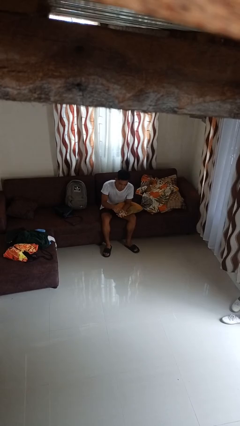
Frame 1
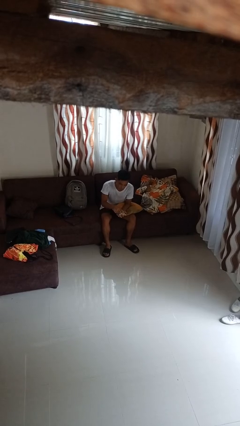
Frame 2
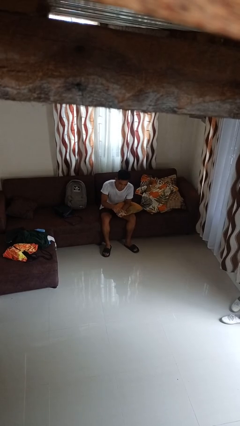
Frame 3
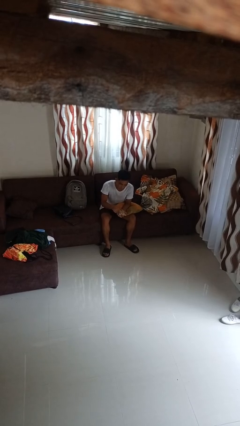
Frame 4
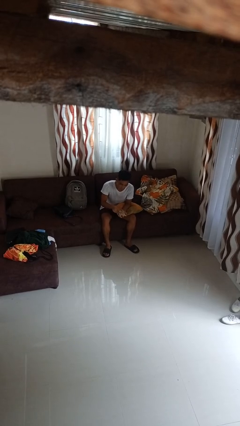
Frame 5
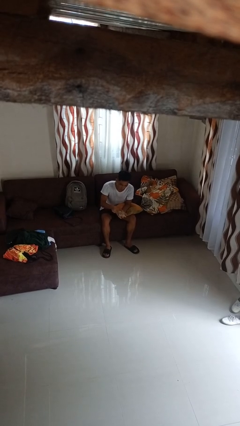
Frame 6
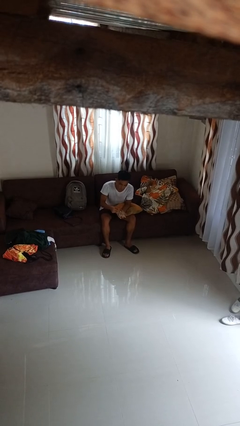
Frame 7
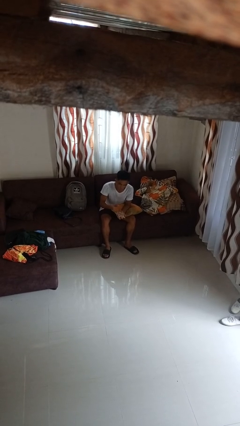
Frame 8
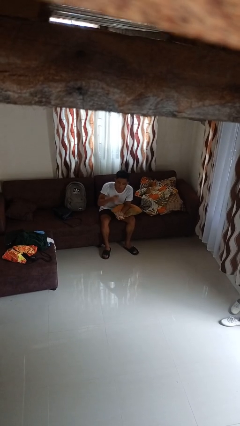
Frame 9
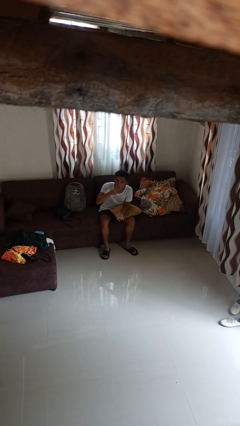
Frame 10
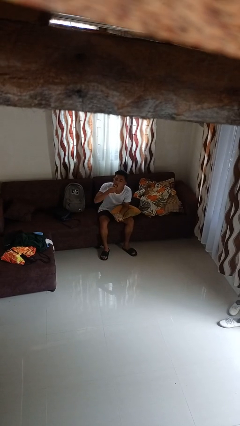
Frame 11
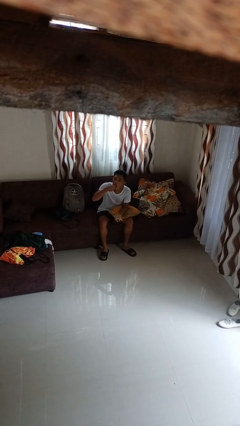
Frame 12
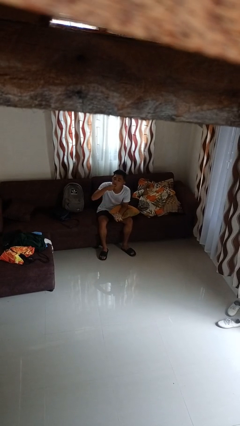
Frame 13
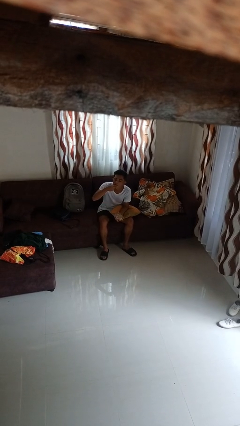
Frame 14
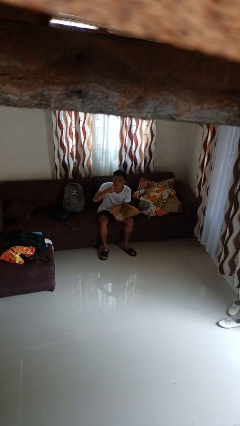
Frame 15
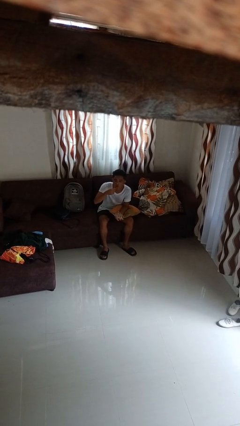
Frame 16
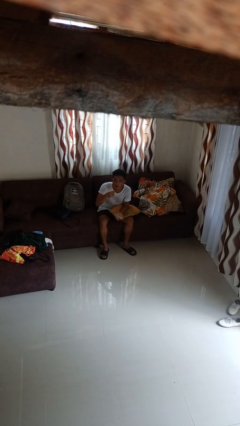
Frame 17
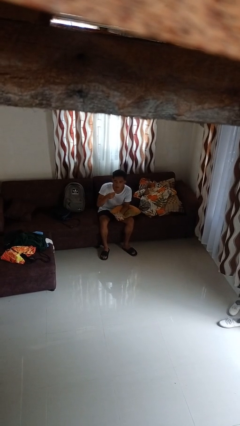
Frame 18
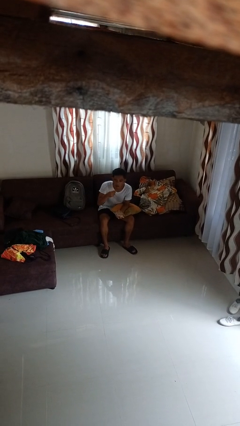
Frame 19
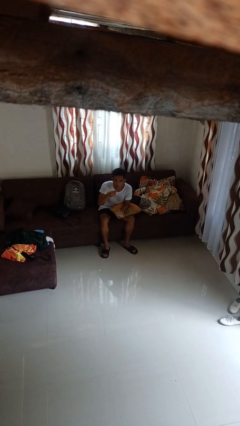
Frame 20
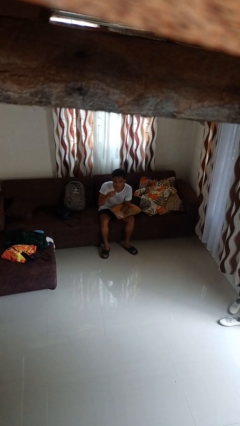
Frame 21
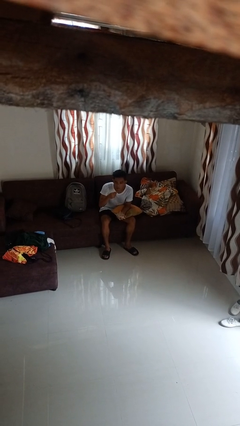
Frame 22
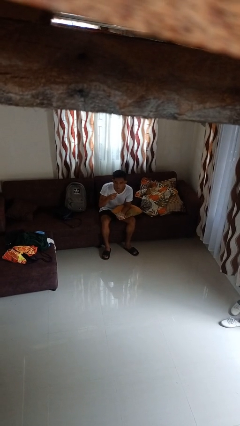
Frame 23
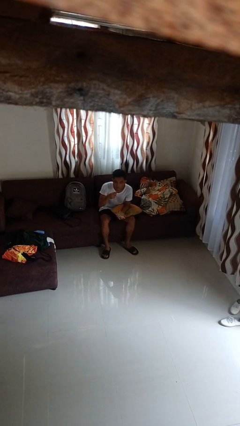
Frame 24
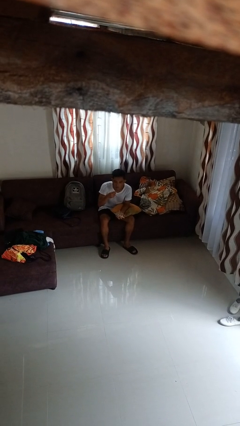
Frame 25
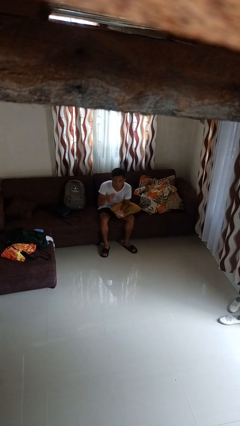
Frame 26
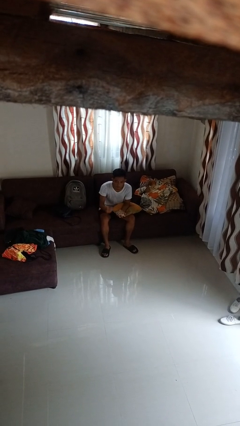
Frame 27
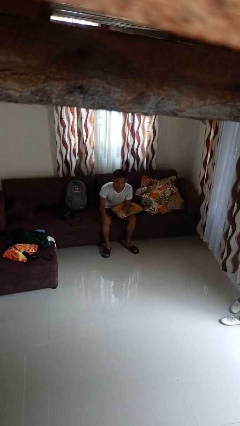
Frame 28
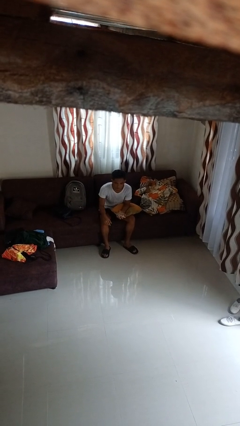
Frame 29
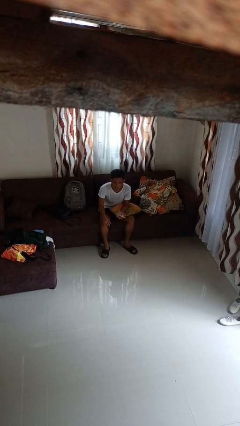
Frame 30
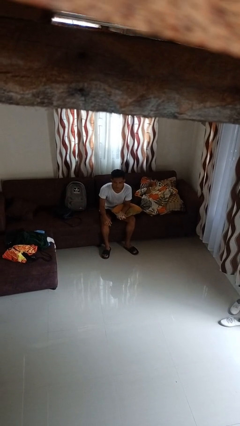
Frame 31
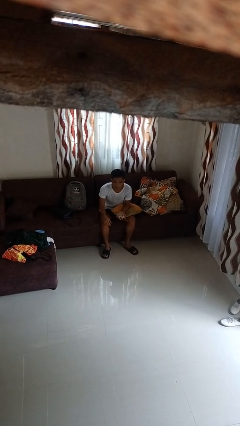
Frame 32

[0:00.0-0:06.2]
person eats snack from bag

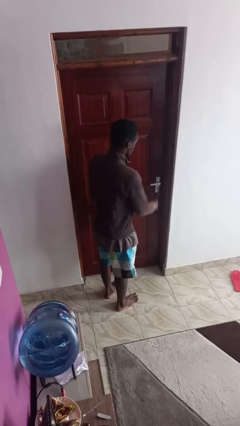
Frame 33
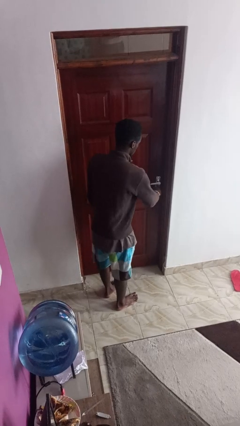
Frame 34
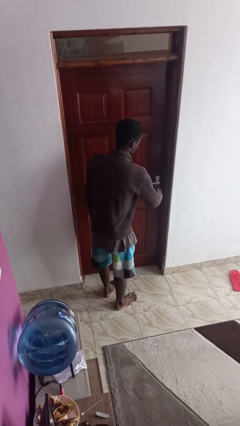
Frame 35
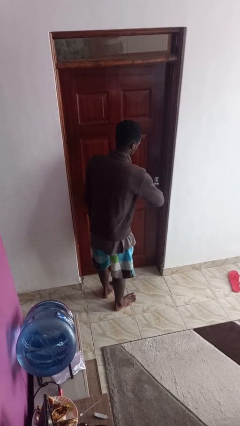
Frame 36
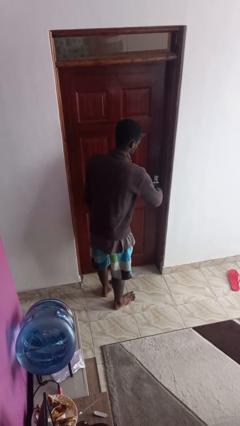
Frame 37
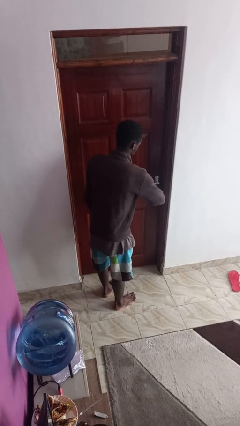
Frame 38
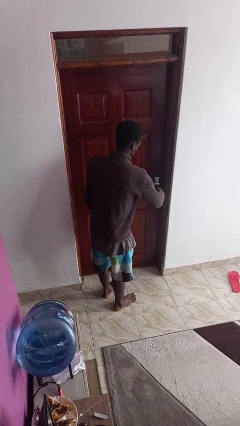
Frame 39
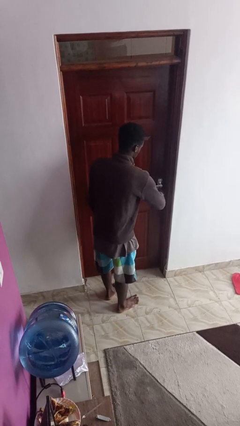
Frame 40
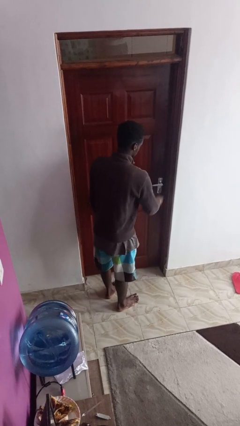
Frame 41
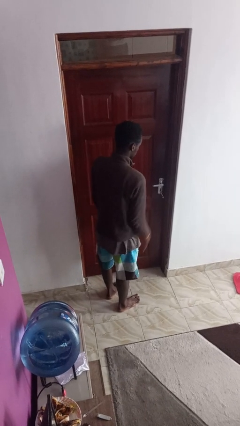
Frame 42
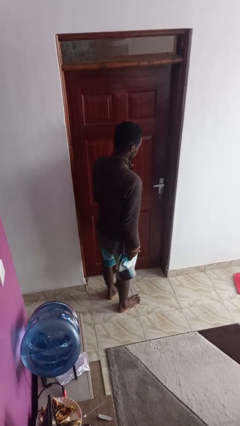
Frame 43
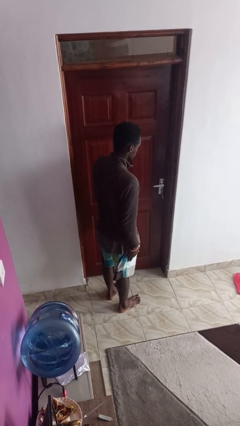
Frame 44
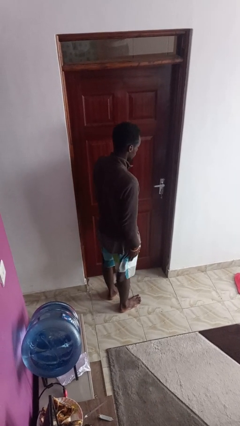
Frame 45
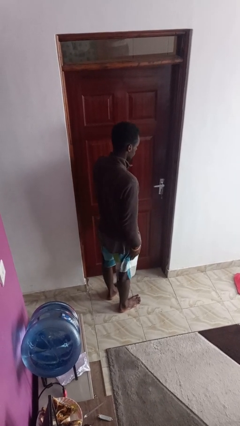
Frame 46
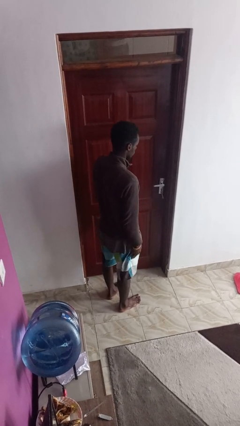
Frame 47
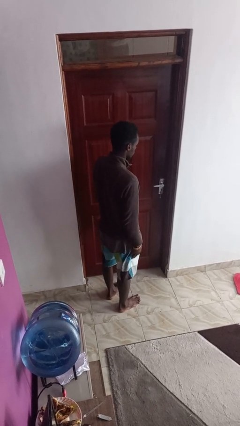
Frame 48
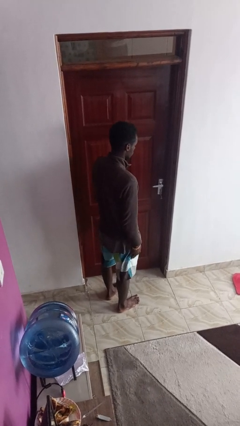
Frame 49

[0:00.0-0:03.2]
person unlocks door with keys

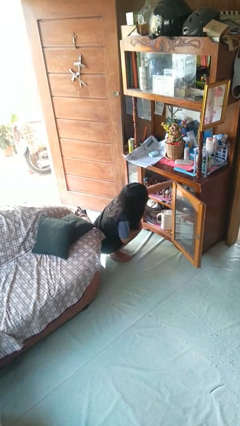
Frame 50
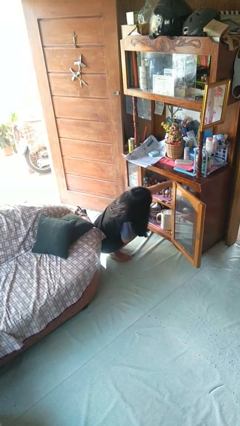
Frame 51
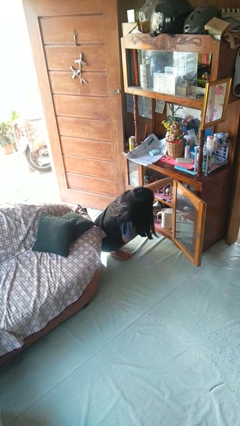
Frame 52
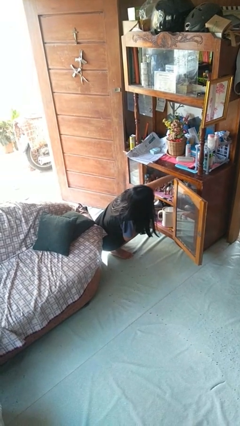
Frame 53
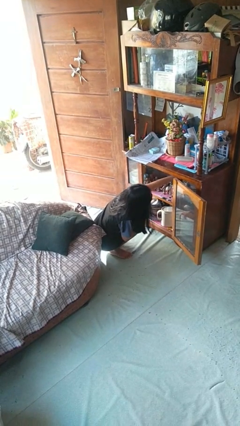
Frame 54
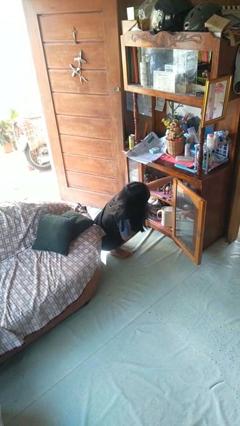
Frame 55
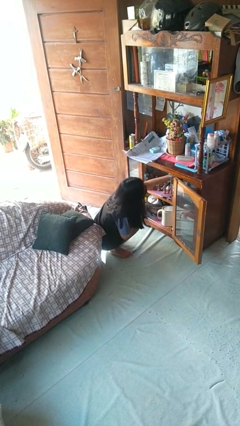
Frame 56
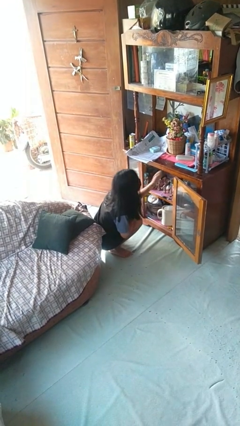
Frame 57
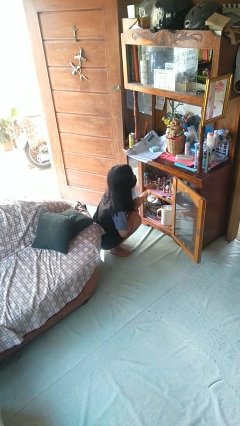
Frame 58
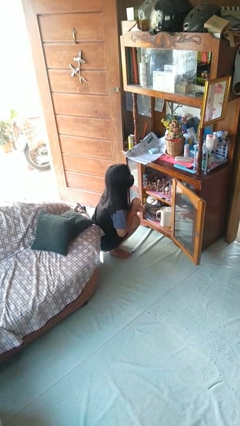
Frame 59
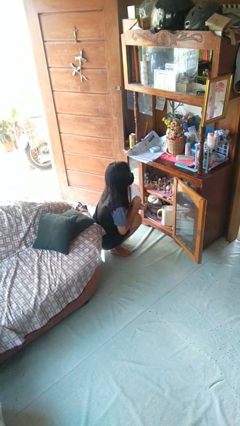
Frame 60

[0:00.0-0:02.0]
person searches in cabinet

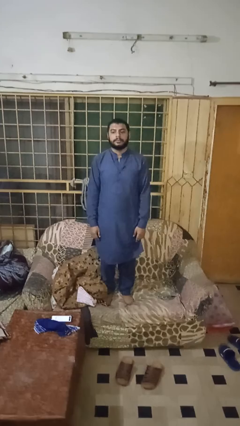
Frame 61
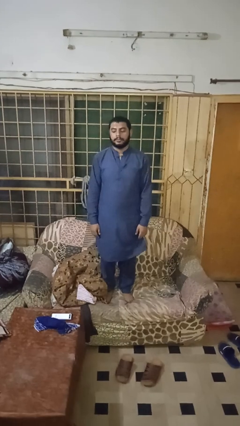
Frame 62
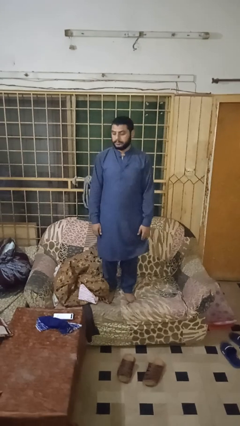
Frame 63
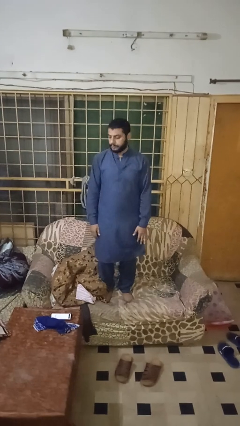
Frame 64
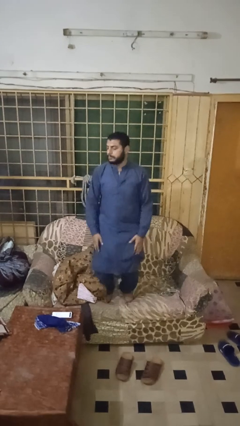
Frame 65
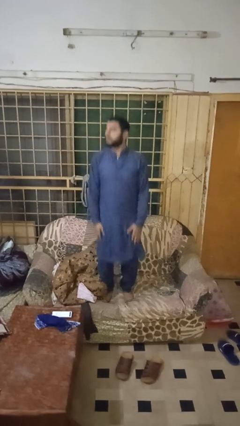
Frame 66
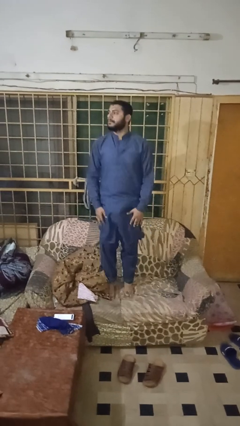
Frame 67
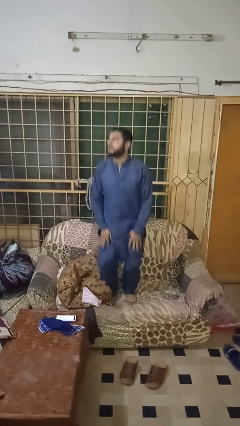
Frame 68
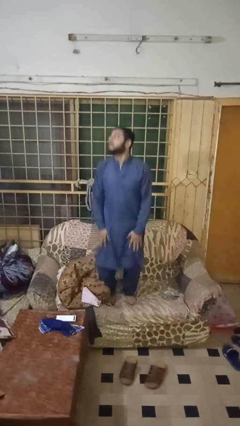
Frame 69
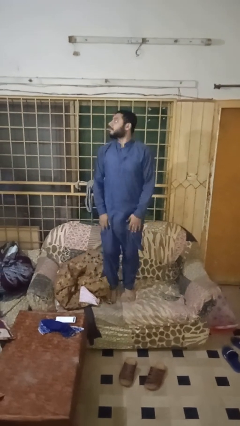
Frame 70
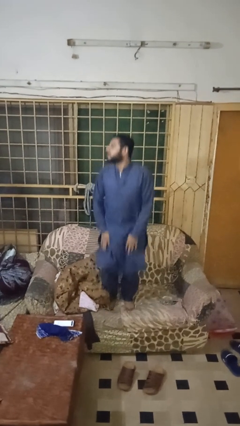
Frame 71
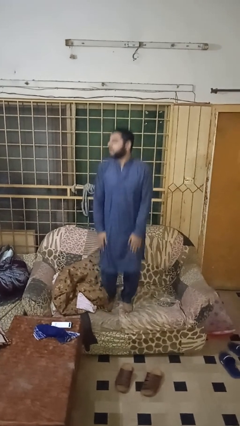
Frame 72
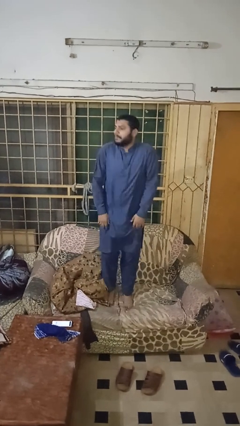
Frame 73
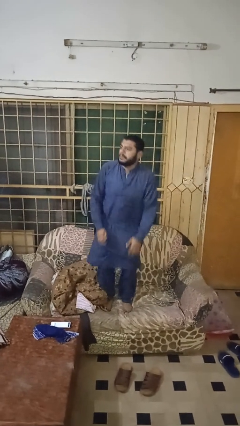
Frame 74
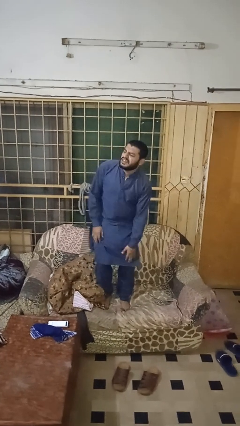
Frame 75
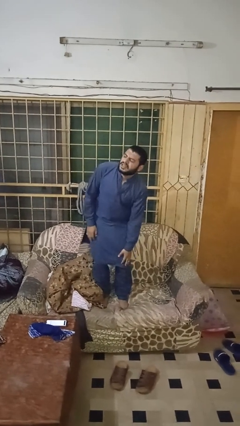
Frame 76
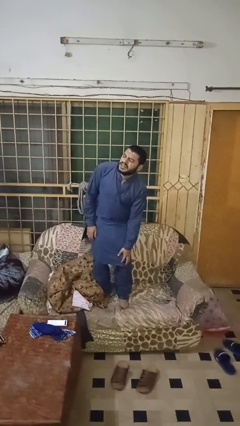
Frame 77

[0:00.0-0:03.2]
person jumps on couch

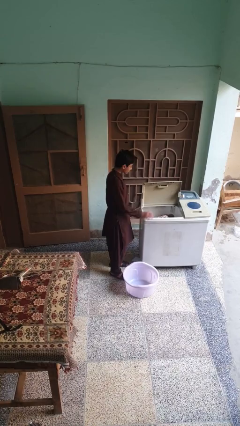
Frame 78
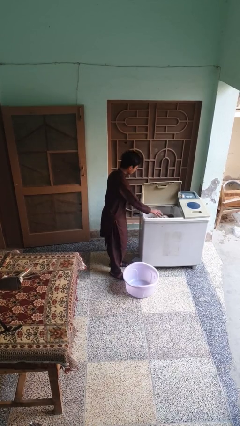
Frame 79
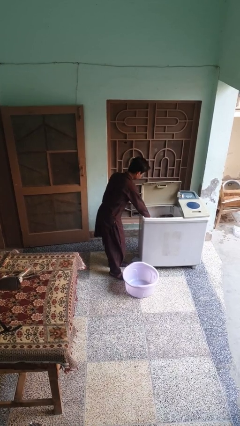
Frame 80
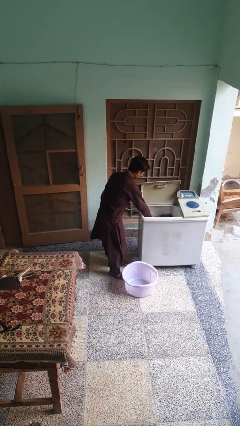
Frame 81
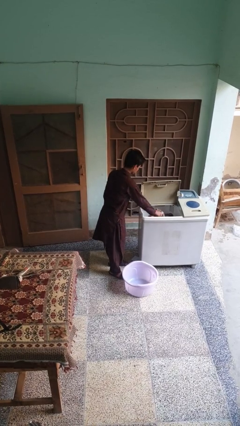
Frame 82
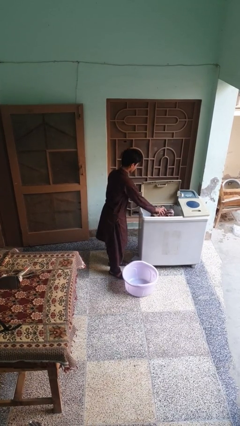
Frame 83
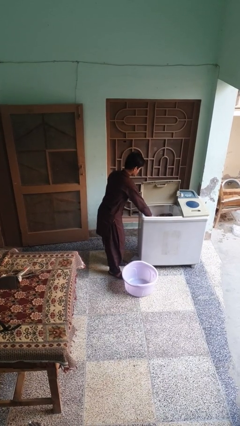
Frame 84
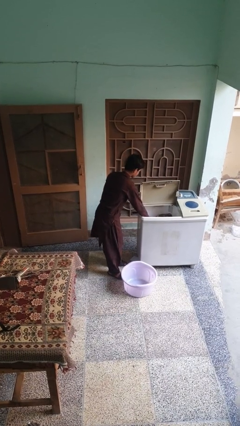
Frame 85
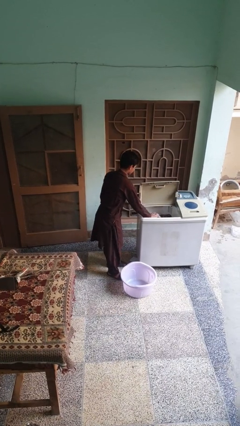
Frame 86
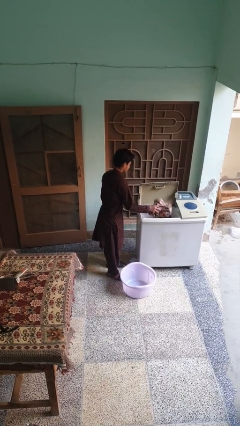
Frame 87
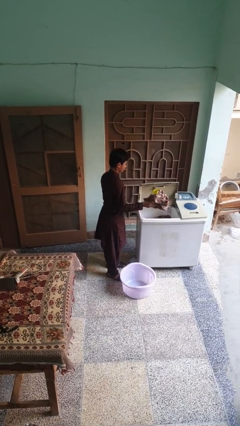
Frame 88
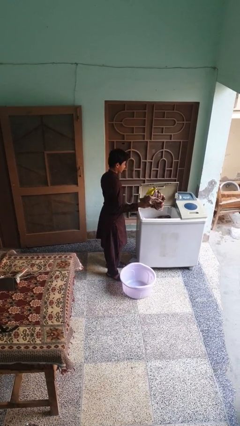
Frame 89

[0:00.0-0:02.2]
person loads clotheswasher

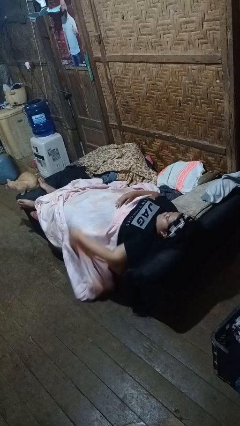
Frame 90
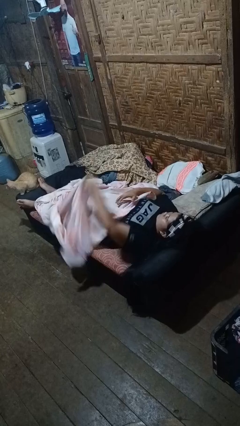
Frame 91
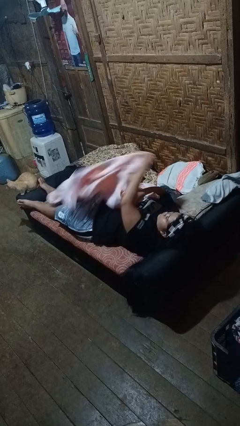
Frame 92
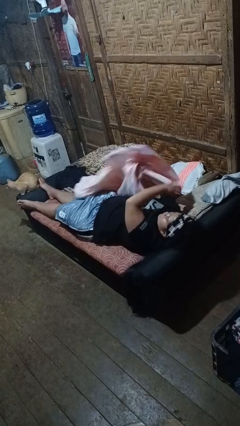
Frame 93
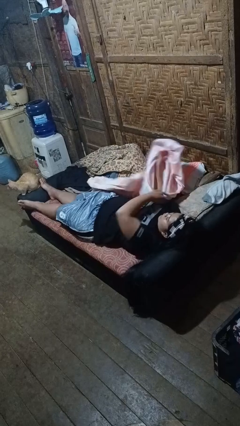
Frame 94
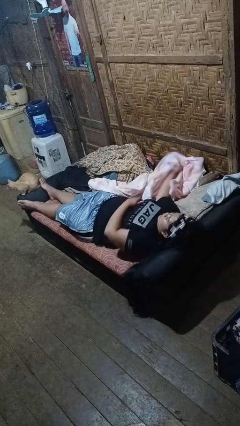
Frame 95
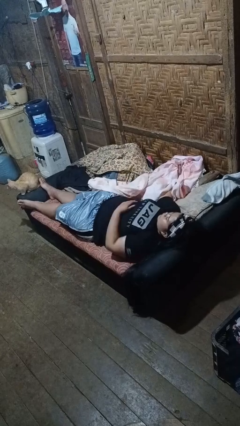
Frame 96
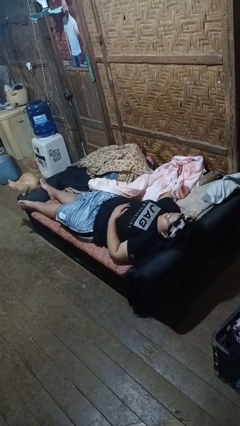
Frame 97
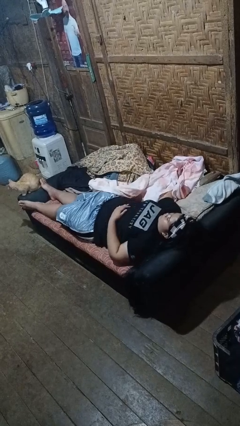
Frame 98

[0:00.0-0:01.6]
person uncovers with bedsheets
